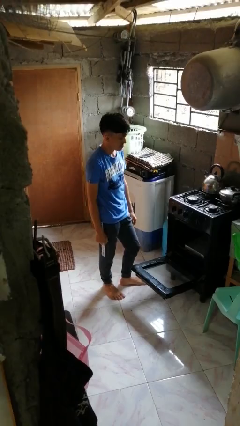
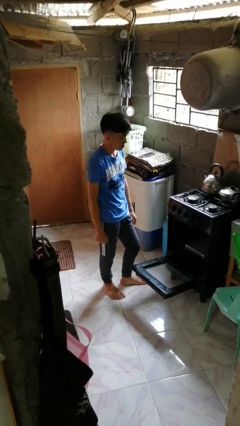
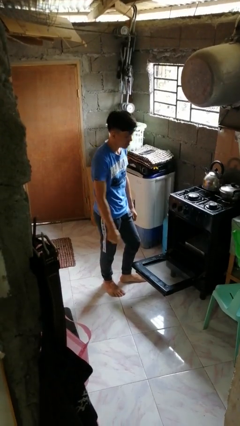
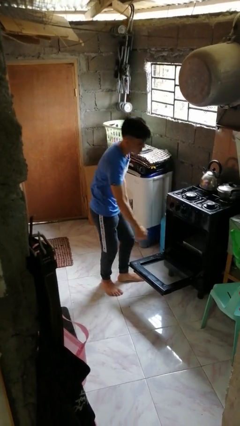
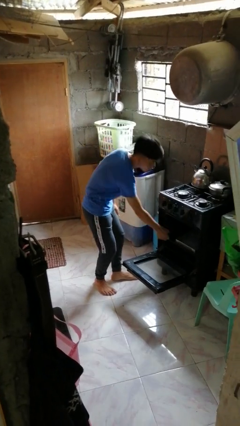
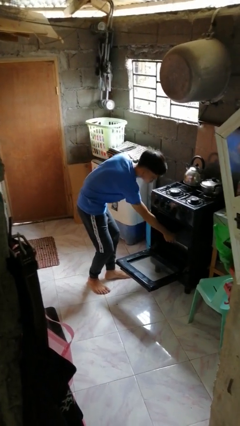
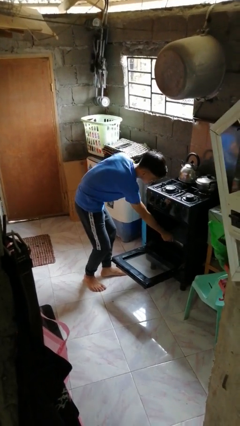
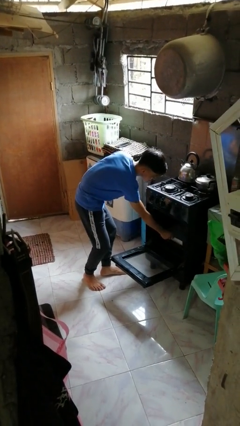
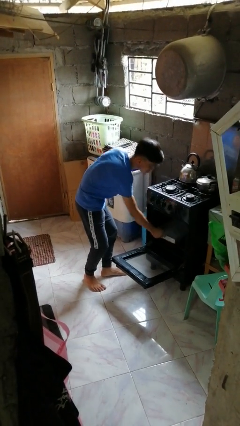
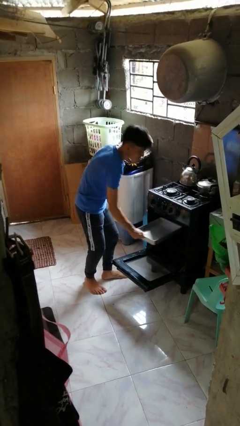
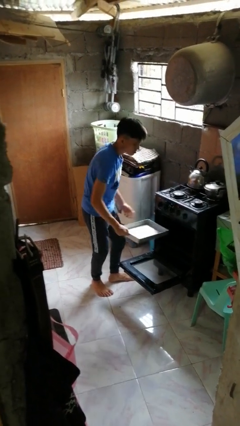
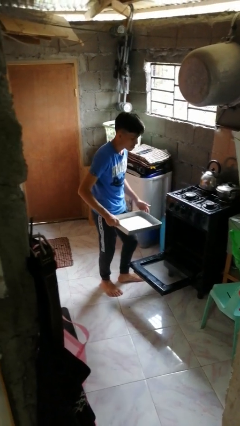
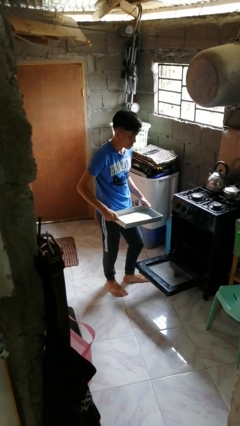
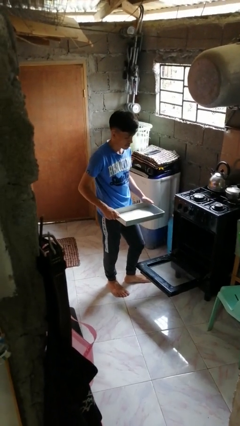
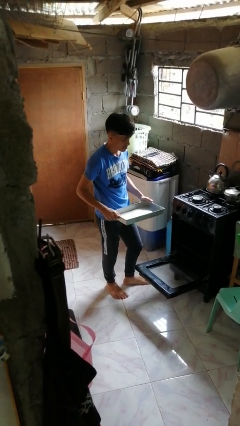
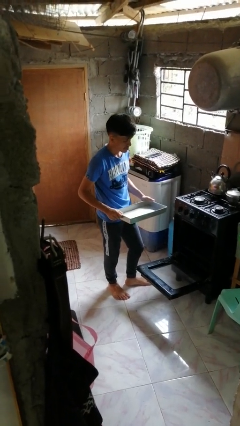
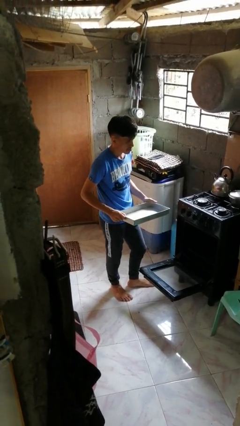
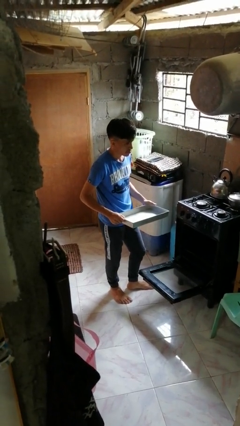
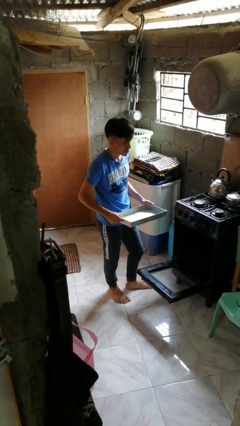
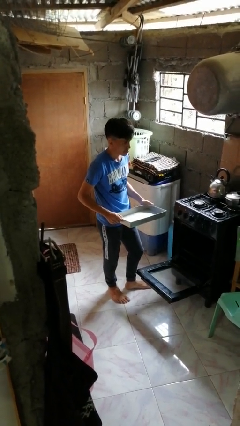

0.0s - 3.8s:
person takes object from oven

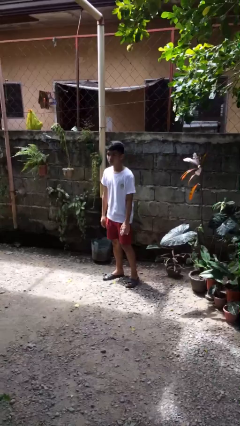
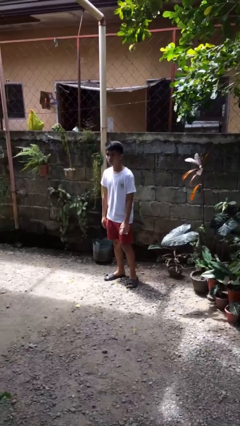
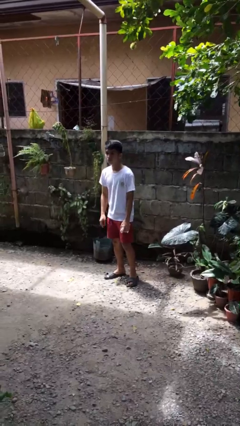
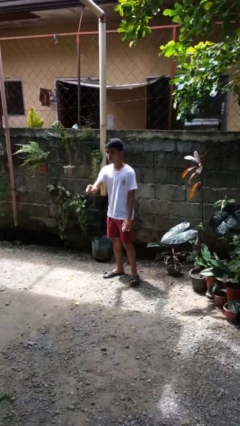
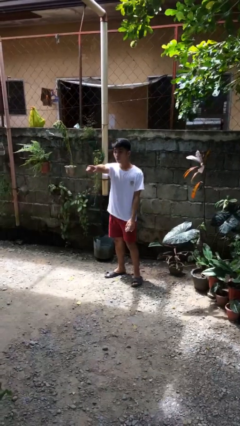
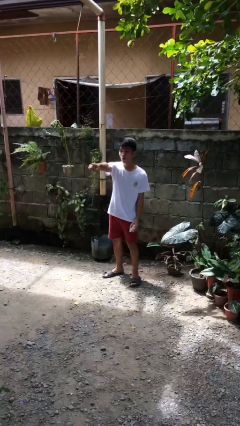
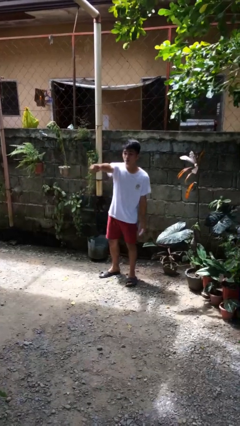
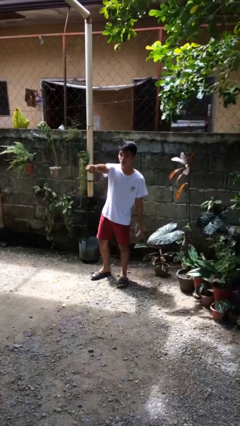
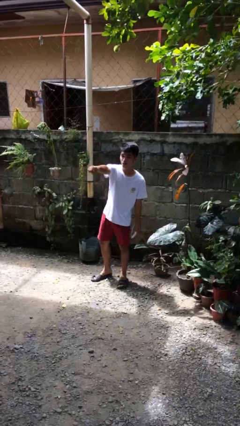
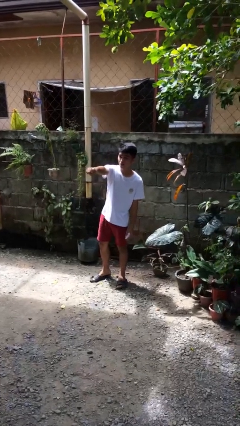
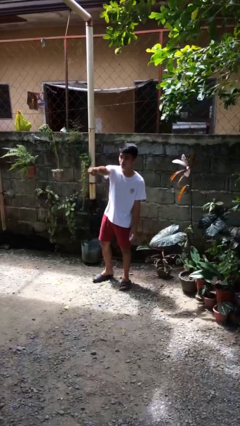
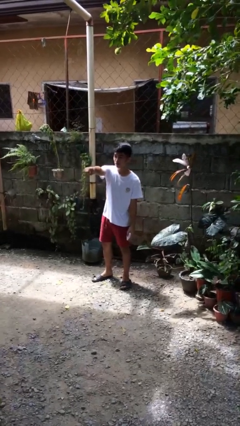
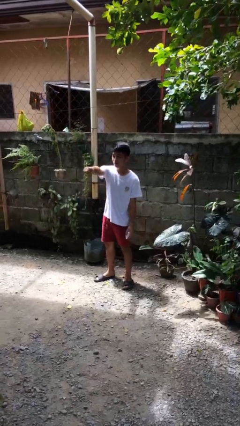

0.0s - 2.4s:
person points at person

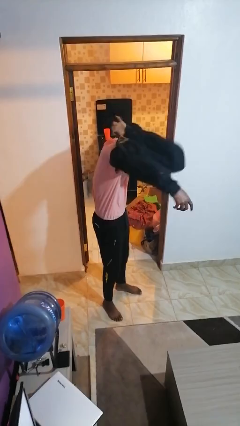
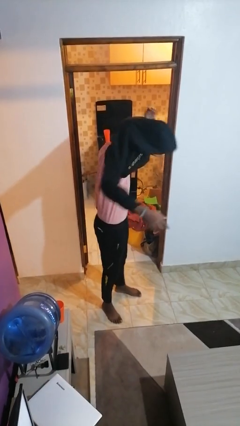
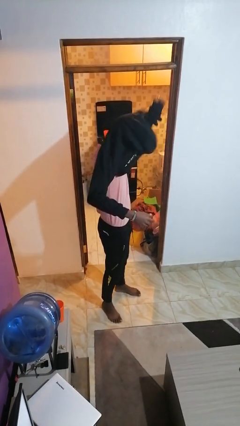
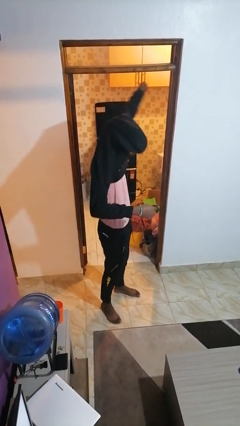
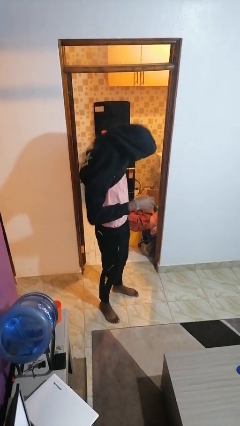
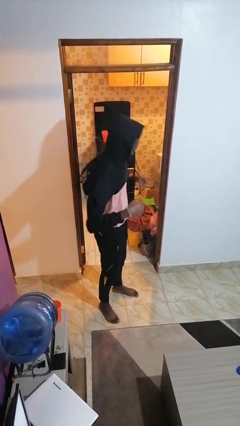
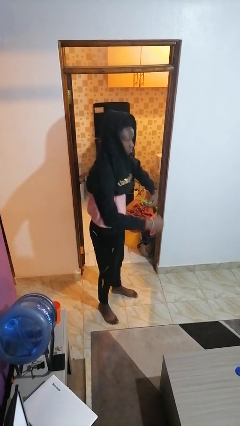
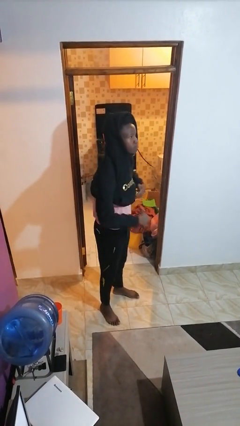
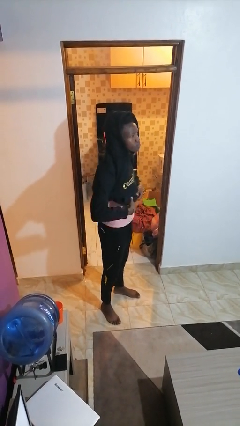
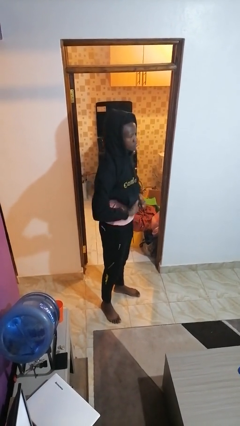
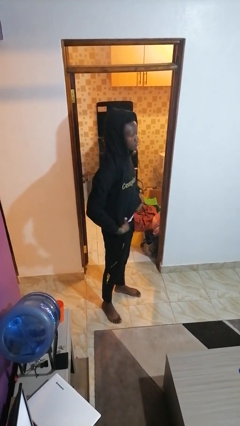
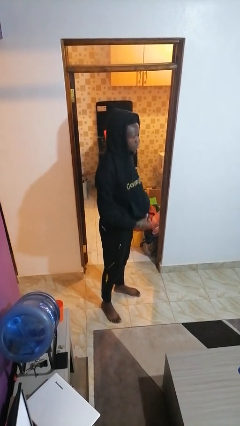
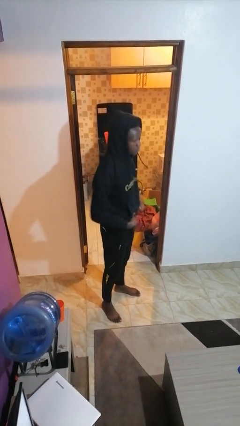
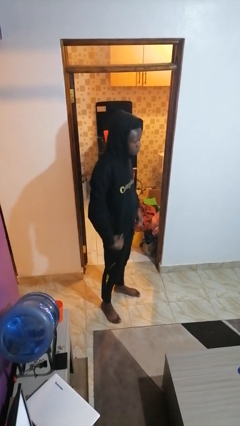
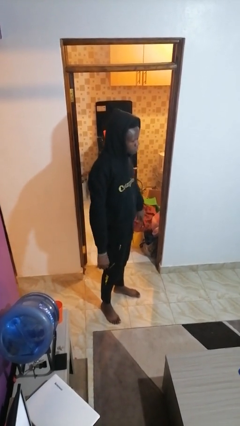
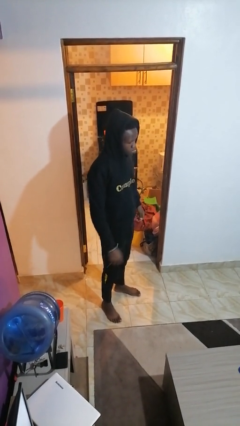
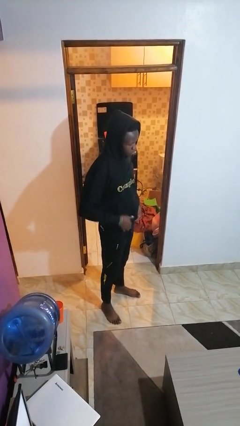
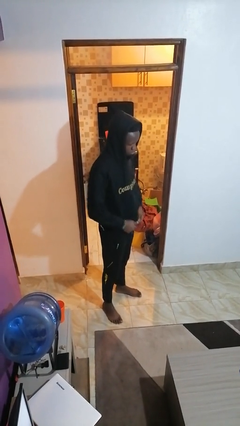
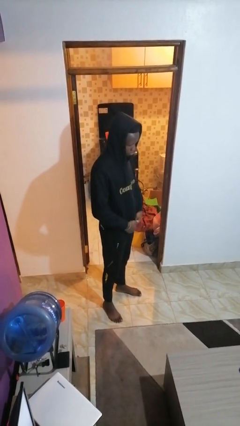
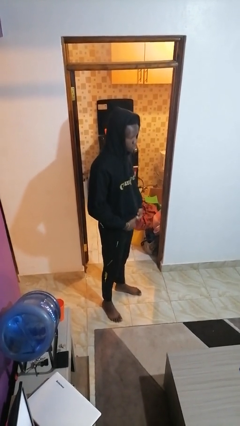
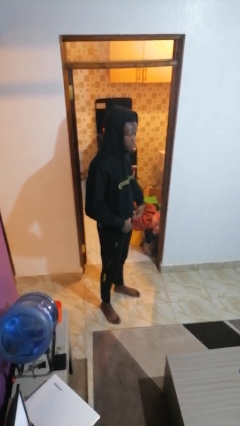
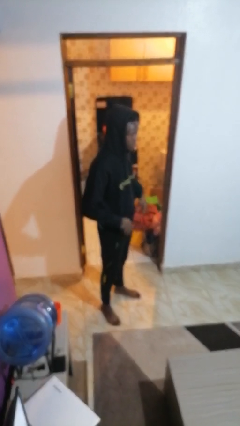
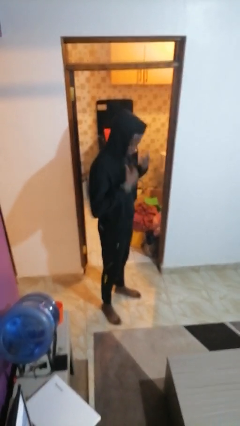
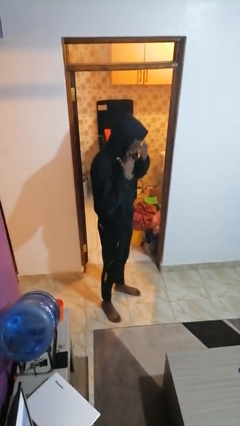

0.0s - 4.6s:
person puts on hoodie

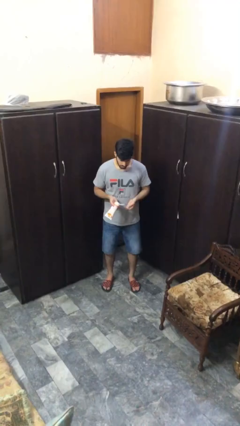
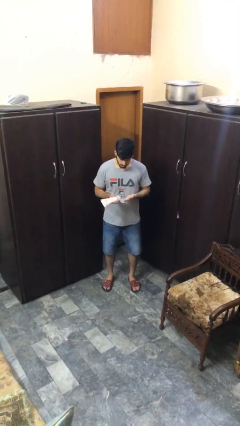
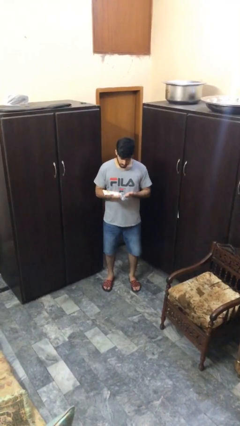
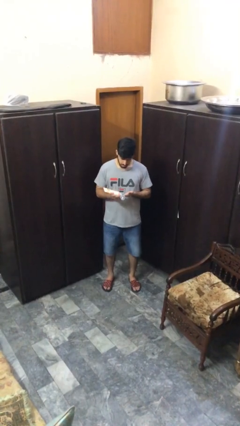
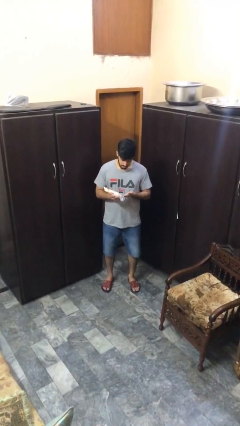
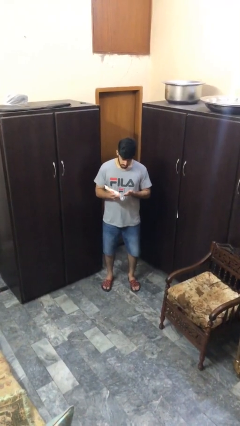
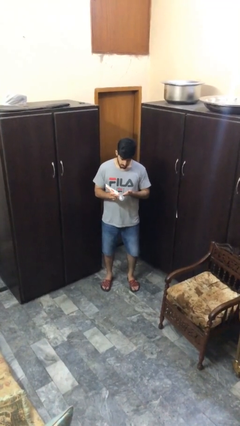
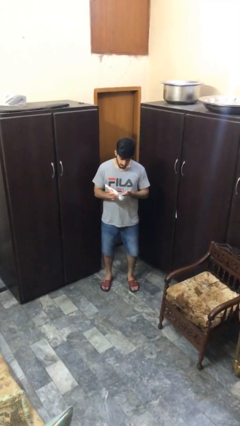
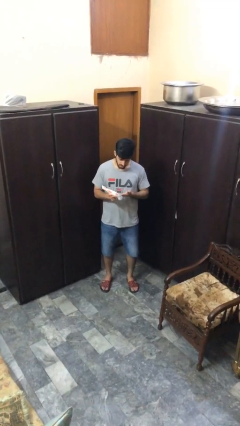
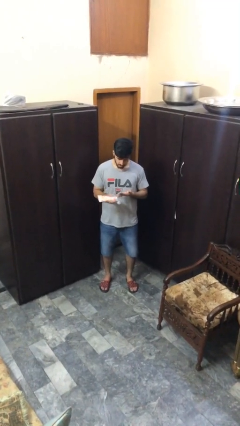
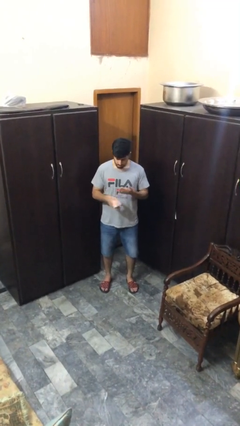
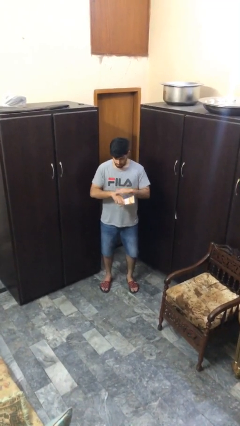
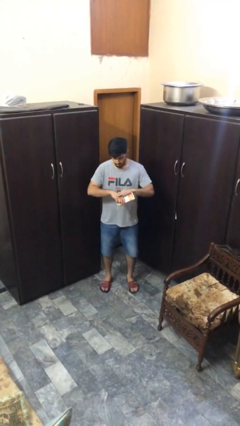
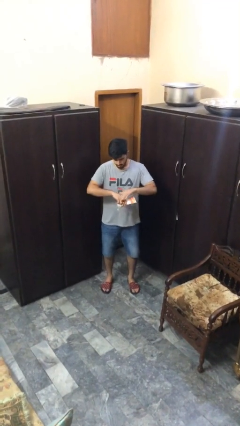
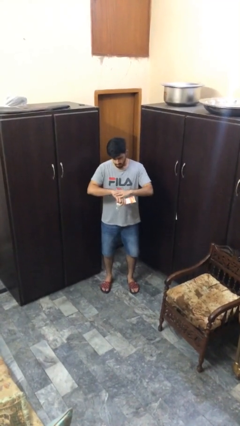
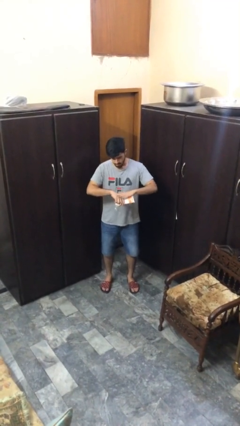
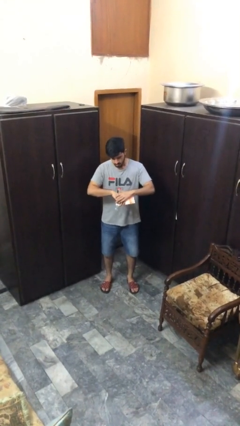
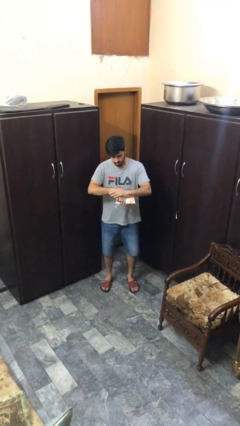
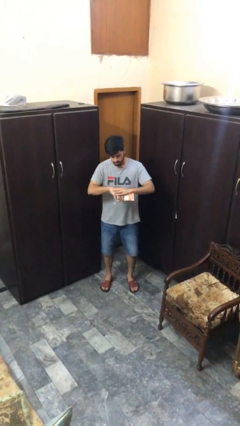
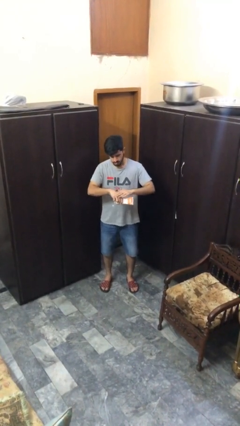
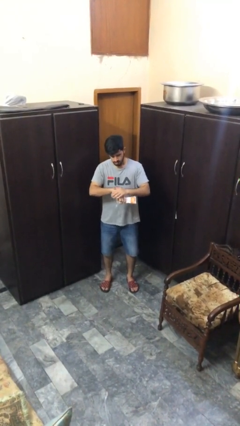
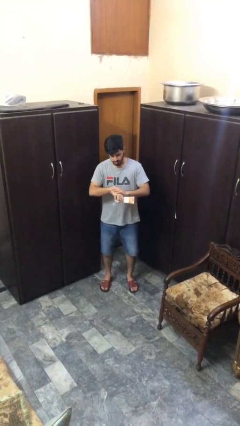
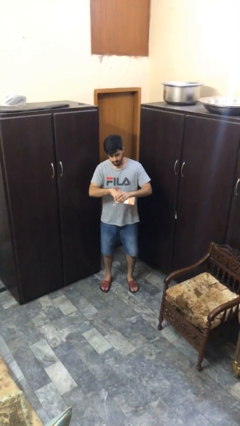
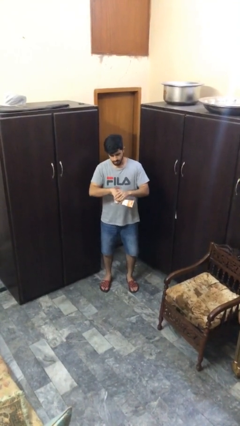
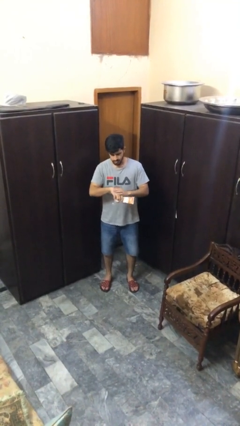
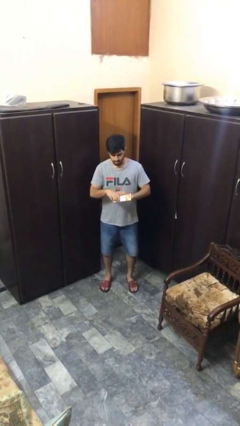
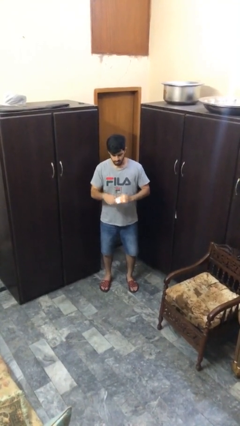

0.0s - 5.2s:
person applies sunscreen

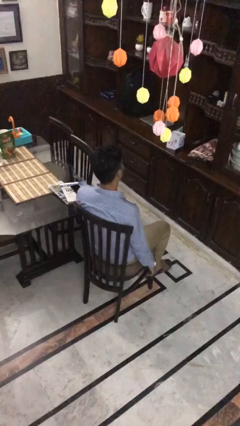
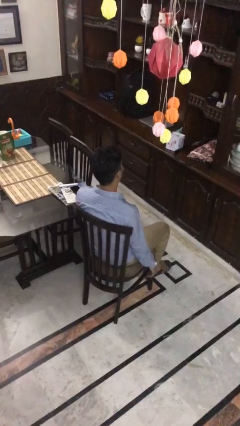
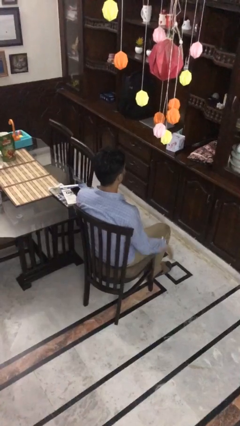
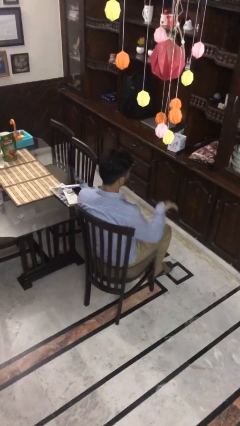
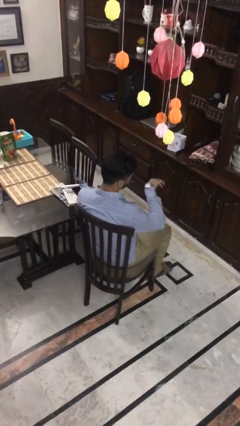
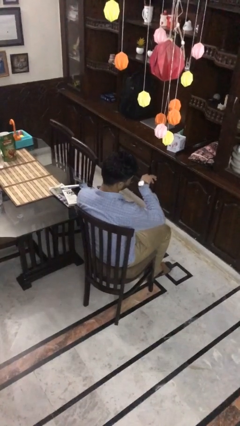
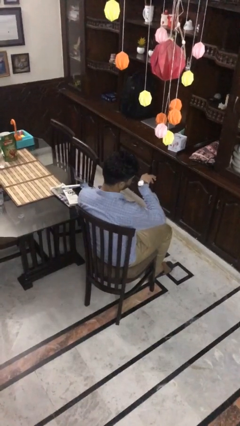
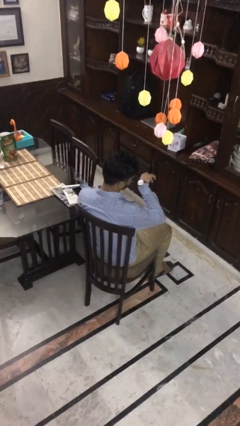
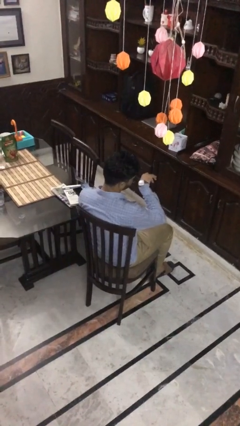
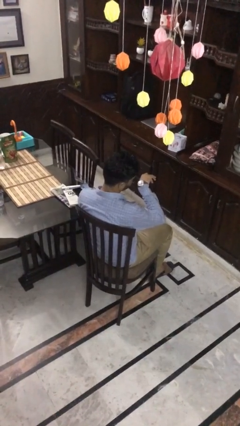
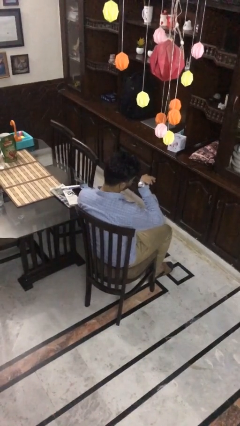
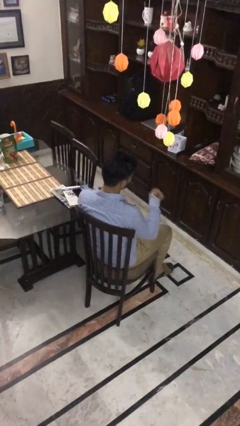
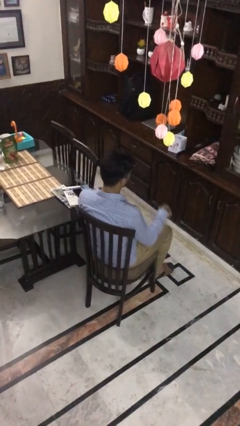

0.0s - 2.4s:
person looks at wristwatch
